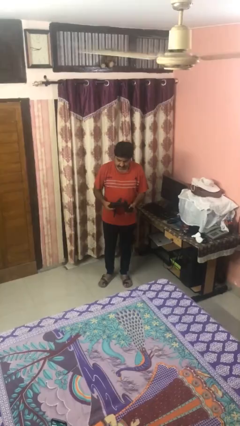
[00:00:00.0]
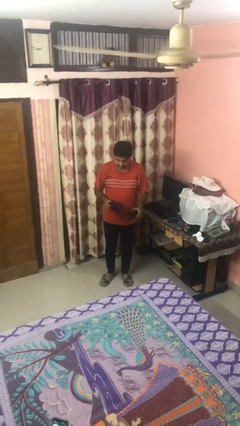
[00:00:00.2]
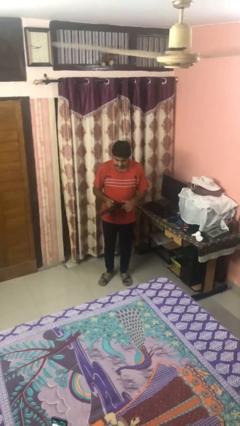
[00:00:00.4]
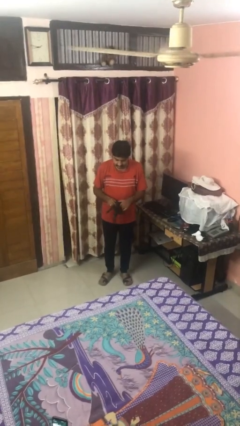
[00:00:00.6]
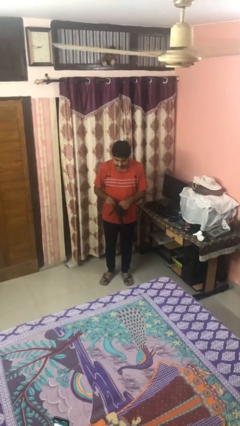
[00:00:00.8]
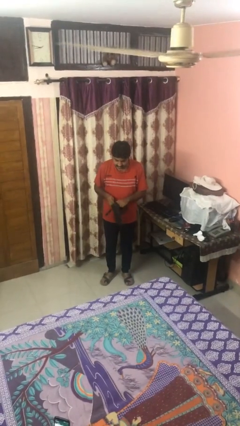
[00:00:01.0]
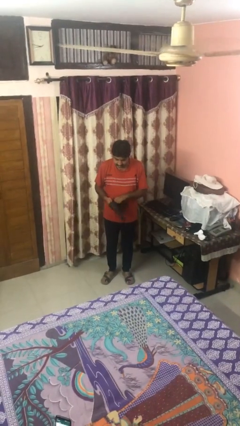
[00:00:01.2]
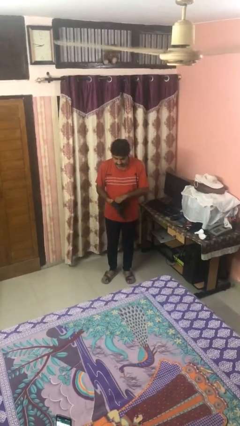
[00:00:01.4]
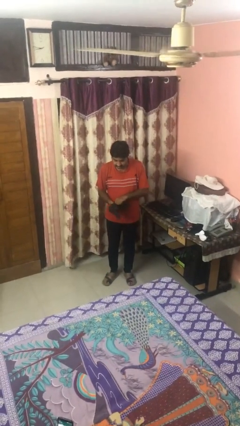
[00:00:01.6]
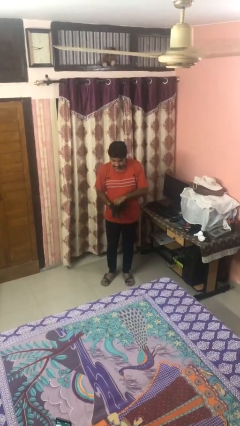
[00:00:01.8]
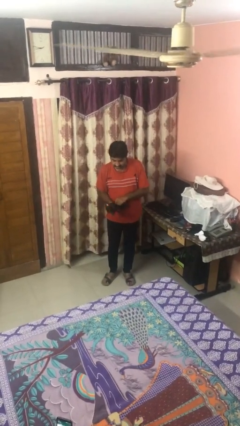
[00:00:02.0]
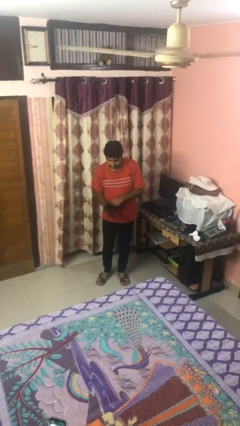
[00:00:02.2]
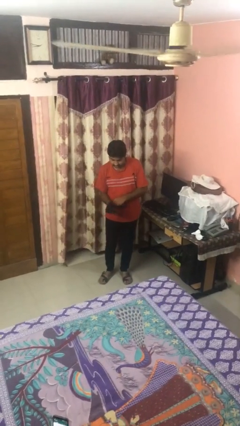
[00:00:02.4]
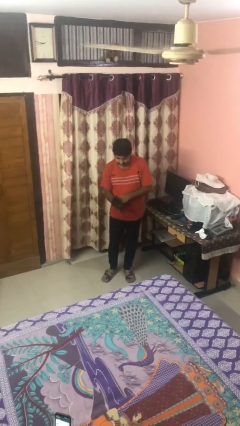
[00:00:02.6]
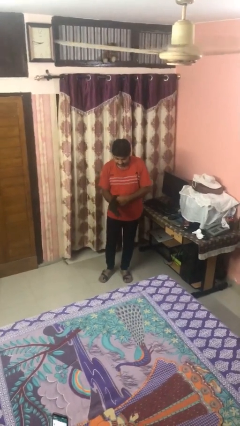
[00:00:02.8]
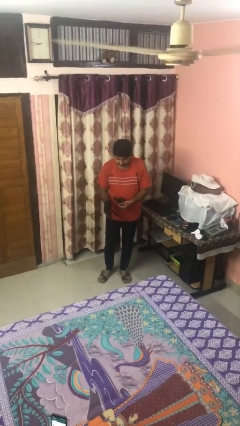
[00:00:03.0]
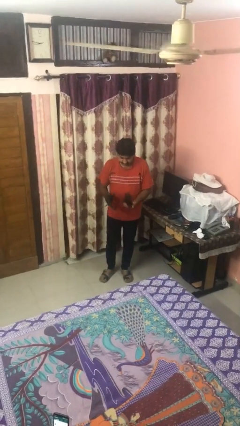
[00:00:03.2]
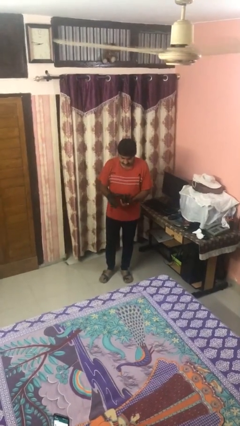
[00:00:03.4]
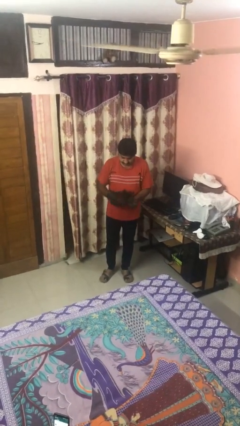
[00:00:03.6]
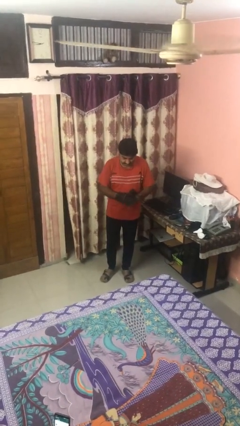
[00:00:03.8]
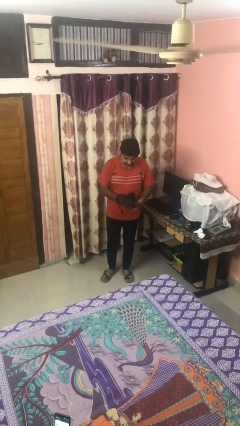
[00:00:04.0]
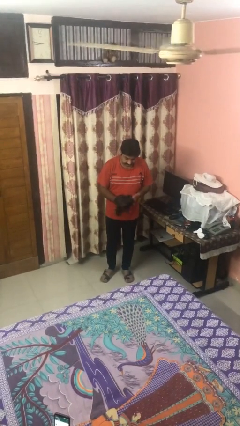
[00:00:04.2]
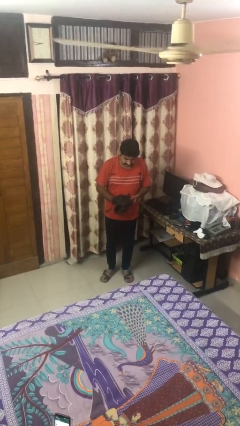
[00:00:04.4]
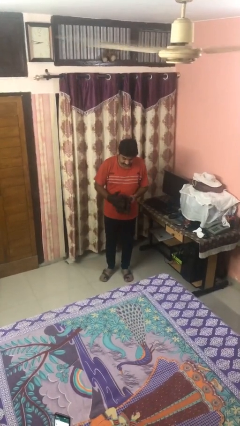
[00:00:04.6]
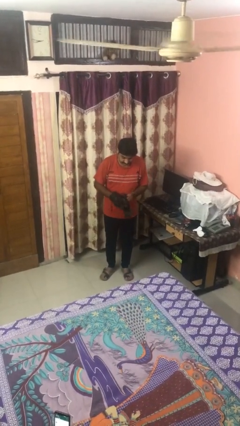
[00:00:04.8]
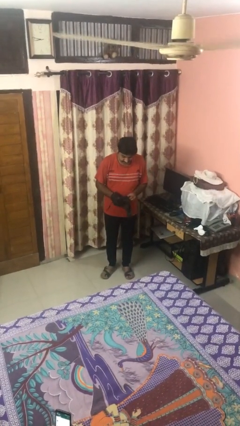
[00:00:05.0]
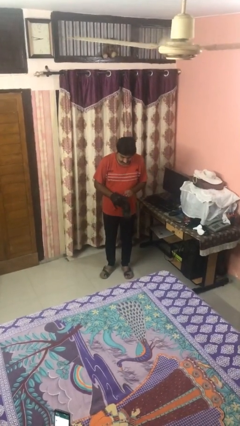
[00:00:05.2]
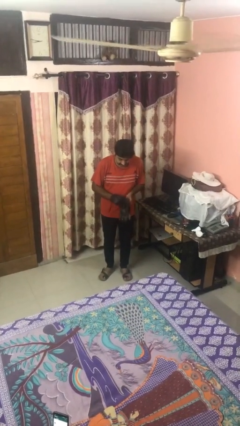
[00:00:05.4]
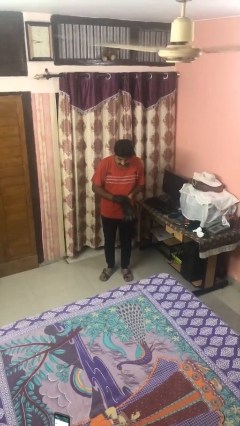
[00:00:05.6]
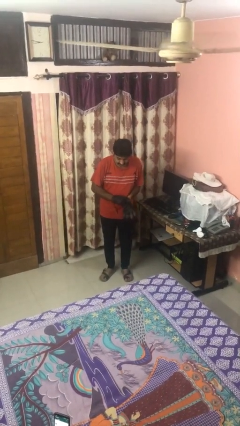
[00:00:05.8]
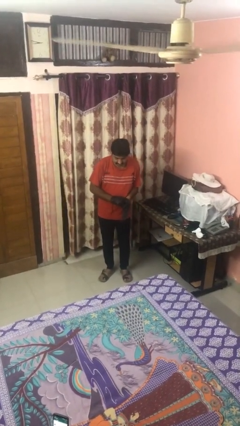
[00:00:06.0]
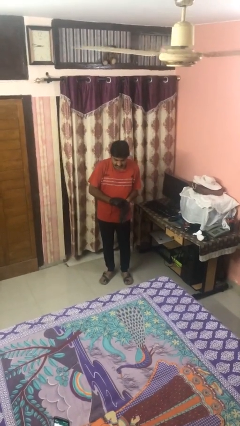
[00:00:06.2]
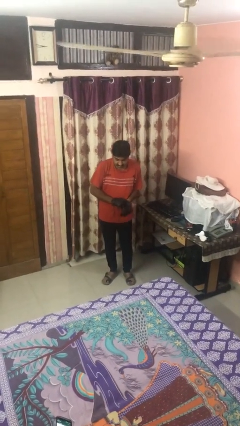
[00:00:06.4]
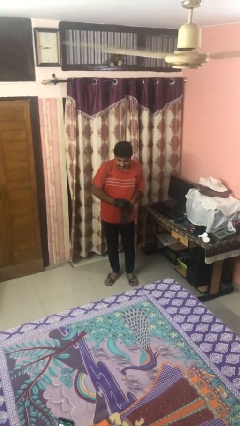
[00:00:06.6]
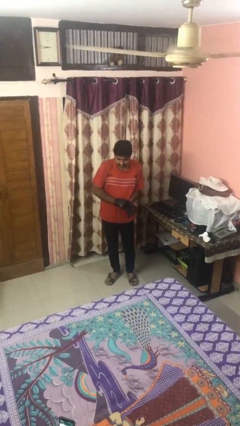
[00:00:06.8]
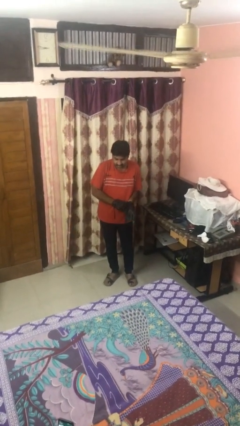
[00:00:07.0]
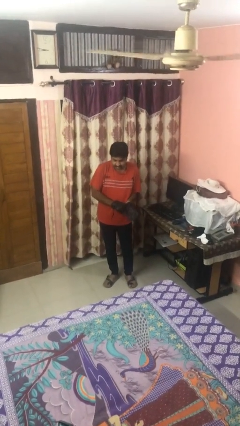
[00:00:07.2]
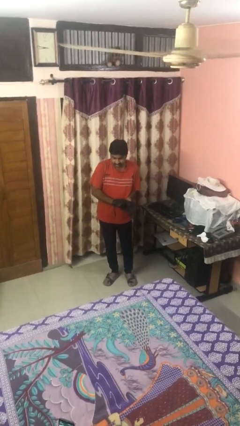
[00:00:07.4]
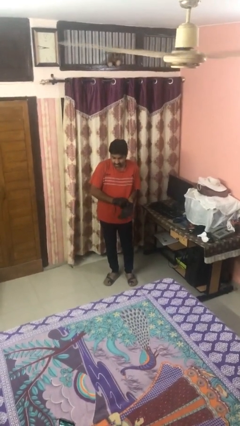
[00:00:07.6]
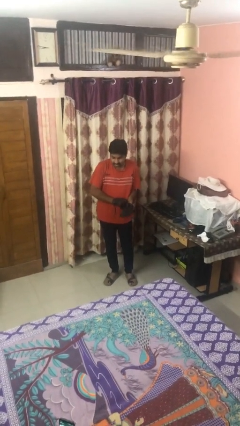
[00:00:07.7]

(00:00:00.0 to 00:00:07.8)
person puts on gloves

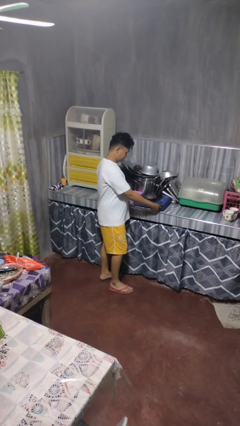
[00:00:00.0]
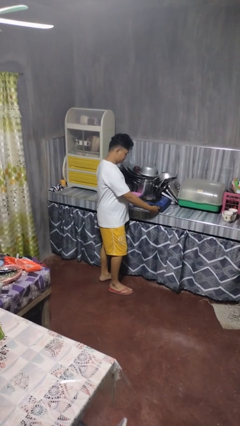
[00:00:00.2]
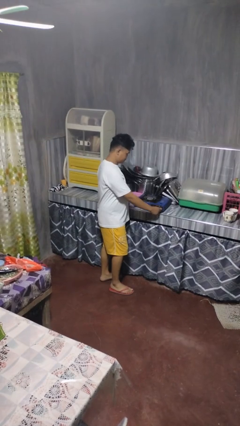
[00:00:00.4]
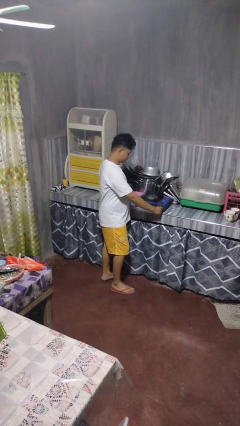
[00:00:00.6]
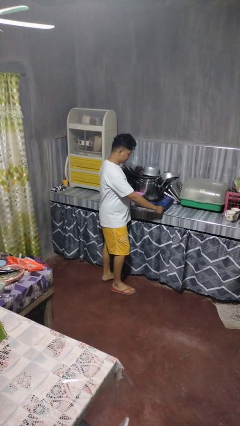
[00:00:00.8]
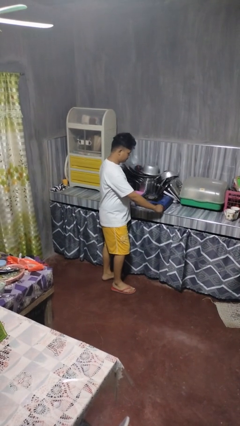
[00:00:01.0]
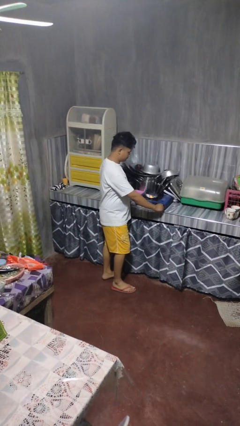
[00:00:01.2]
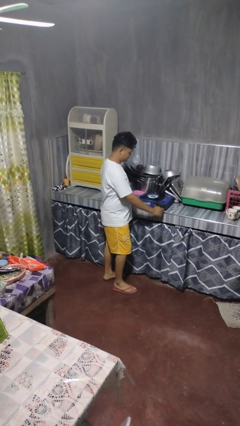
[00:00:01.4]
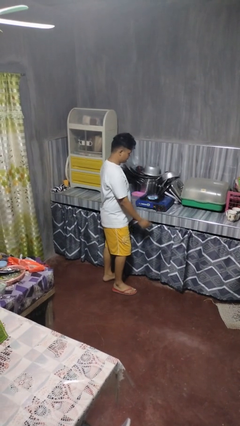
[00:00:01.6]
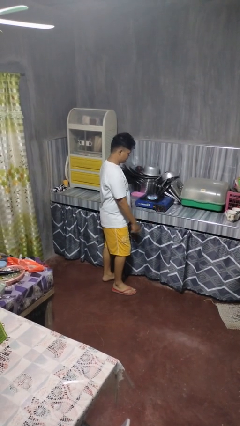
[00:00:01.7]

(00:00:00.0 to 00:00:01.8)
person turns on stovetop

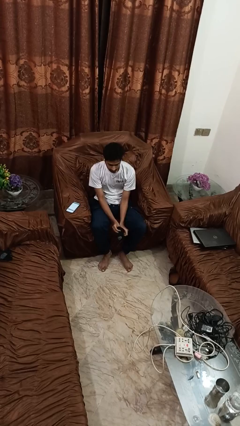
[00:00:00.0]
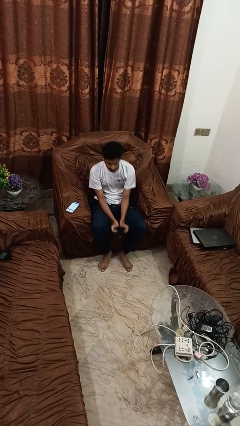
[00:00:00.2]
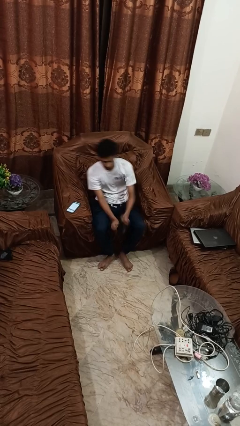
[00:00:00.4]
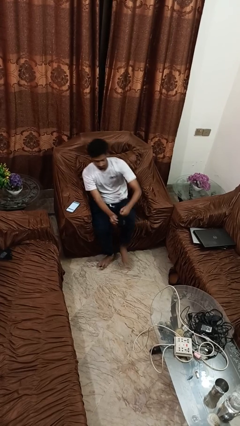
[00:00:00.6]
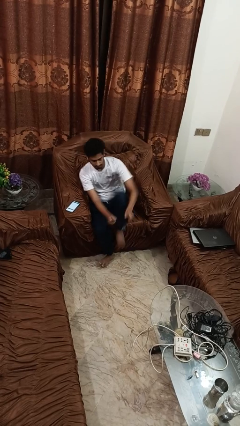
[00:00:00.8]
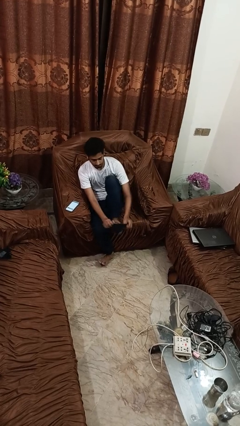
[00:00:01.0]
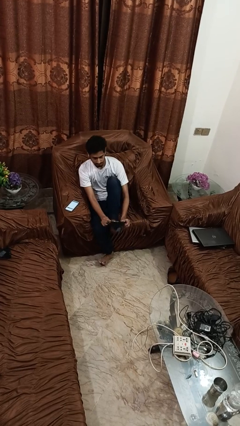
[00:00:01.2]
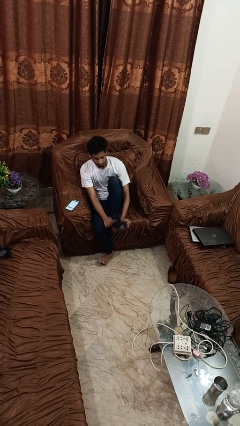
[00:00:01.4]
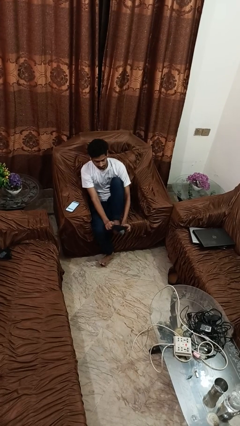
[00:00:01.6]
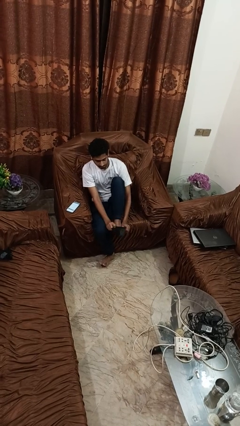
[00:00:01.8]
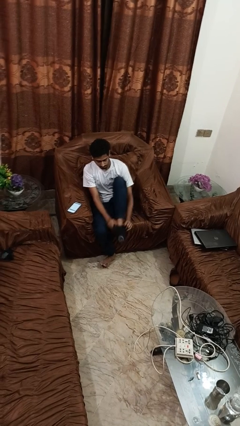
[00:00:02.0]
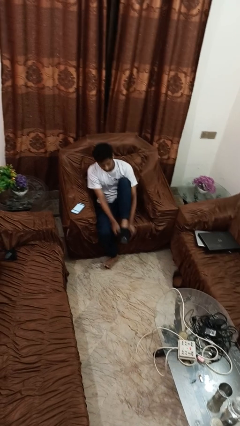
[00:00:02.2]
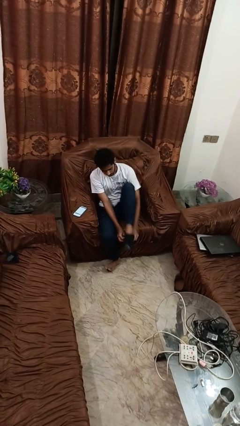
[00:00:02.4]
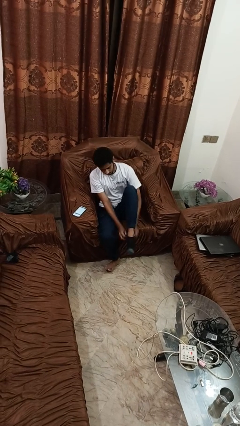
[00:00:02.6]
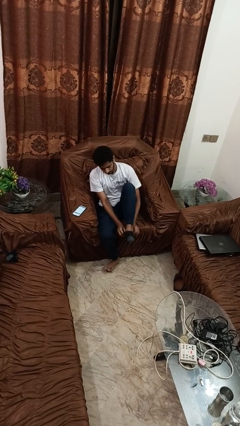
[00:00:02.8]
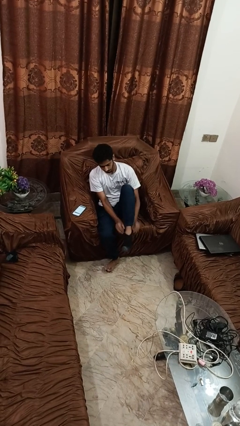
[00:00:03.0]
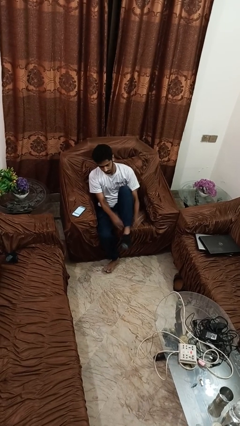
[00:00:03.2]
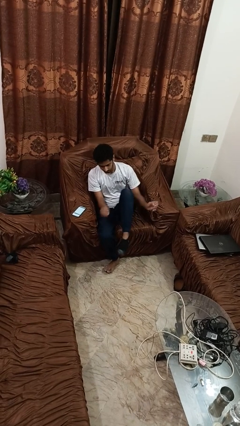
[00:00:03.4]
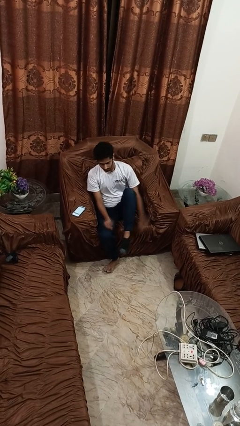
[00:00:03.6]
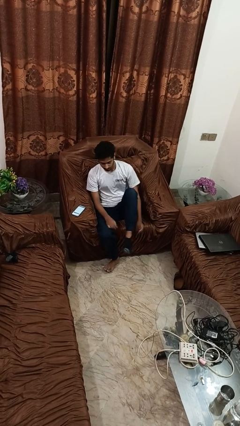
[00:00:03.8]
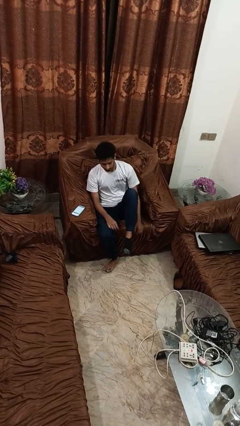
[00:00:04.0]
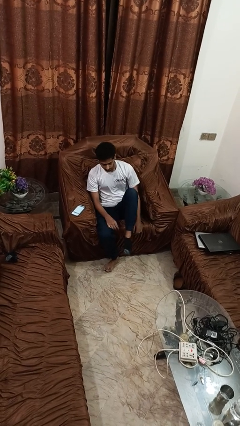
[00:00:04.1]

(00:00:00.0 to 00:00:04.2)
person puts on socks

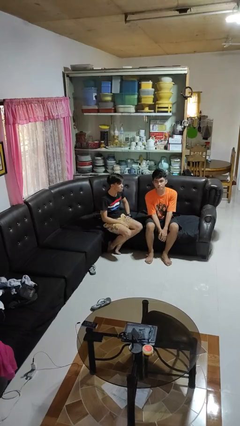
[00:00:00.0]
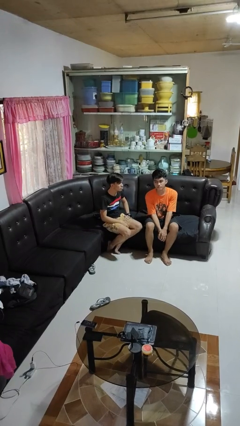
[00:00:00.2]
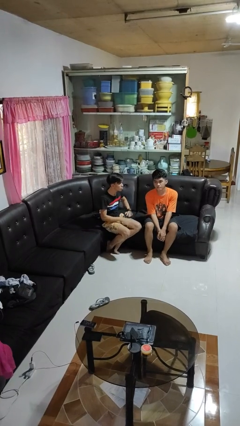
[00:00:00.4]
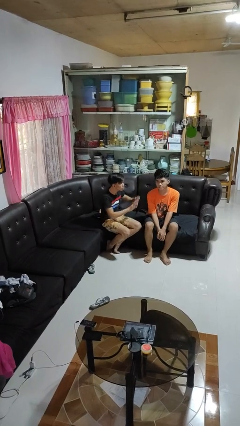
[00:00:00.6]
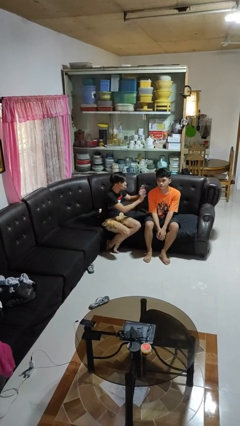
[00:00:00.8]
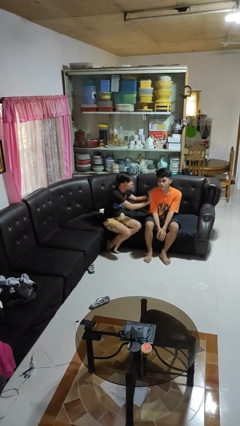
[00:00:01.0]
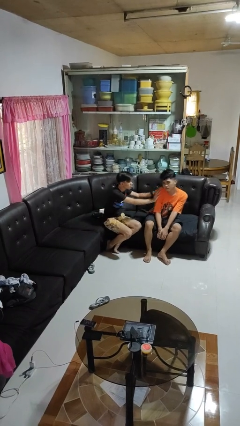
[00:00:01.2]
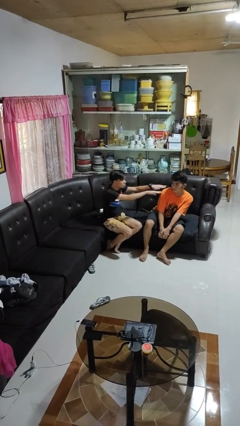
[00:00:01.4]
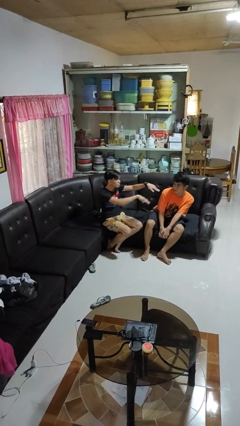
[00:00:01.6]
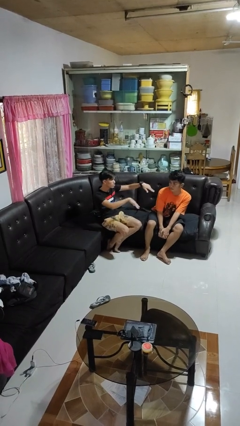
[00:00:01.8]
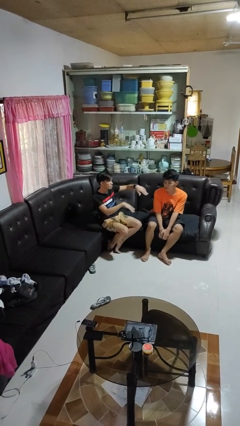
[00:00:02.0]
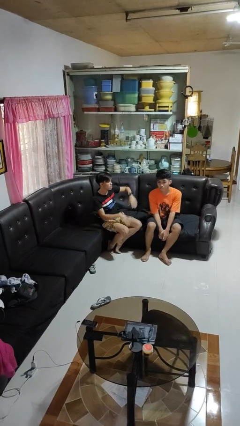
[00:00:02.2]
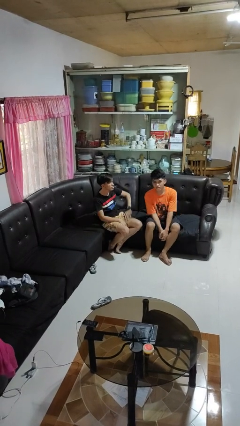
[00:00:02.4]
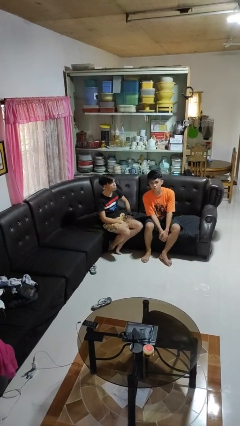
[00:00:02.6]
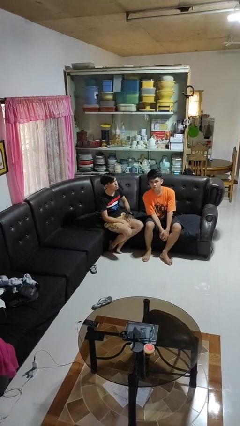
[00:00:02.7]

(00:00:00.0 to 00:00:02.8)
person shoves person

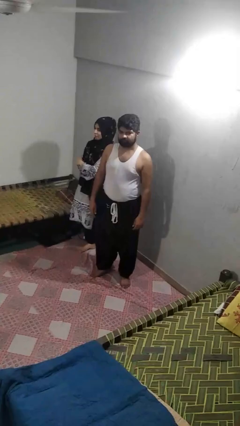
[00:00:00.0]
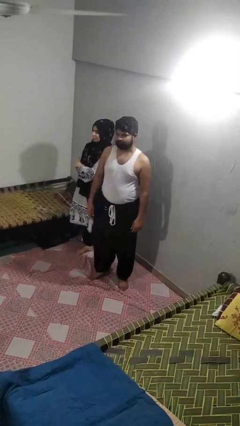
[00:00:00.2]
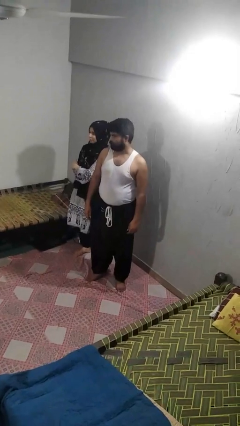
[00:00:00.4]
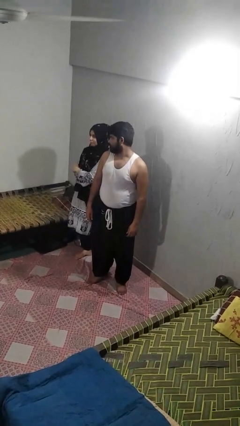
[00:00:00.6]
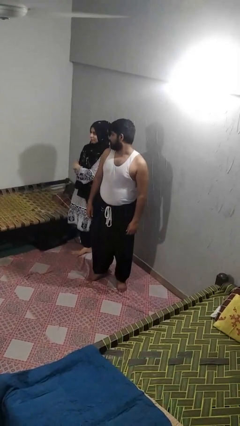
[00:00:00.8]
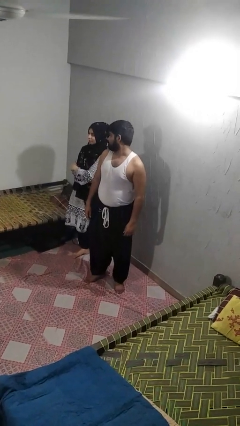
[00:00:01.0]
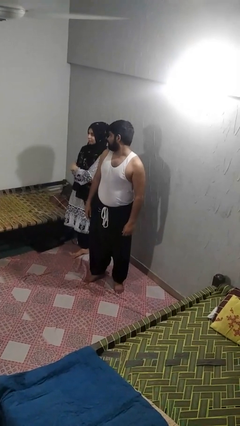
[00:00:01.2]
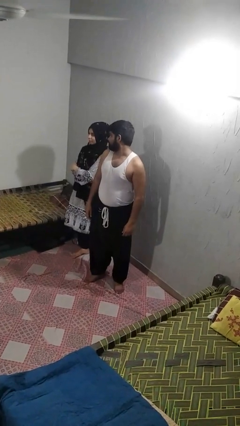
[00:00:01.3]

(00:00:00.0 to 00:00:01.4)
person looks over shoulder
